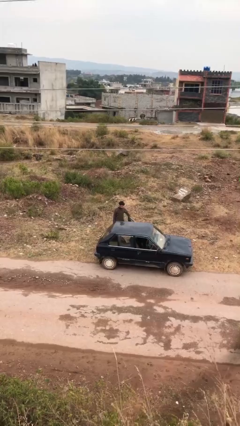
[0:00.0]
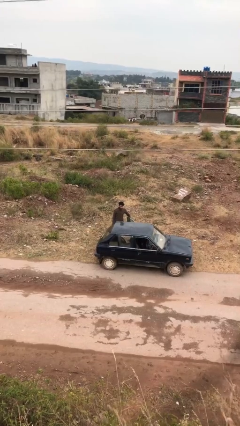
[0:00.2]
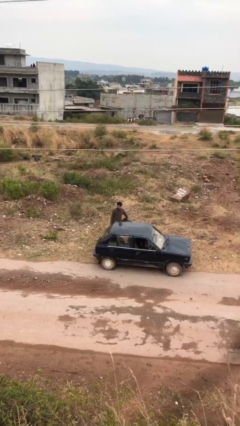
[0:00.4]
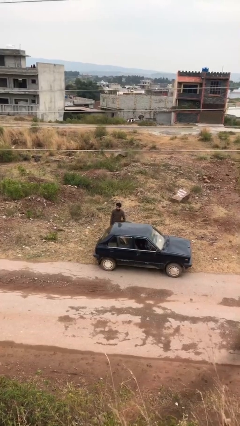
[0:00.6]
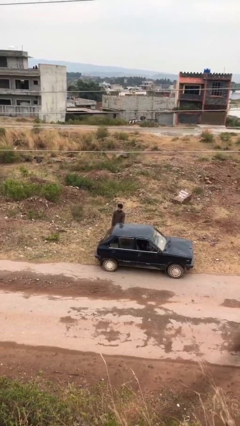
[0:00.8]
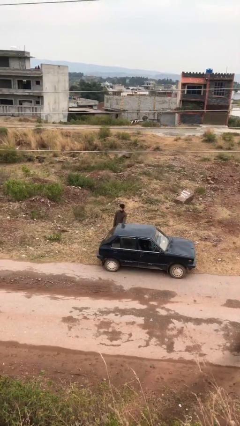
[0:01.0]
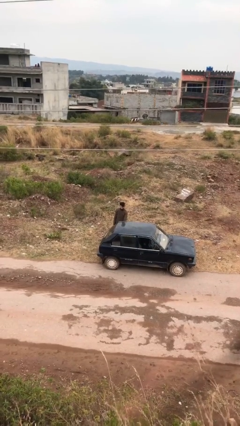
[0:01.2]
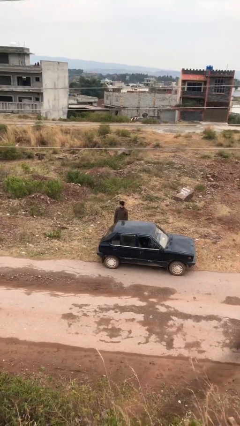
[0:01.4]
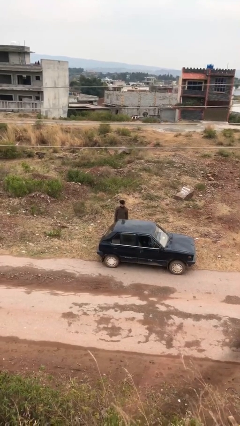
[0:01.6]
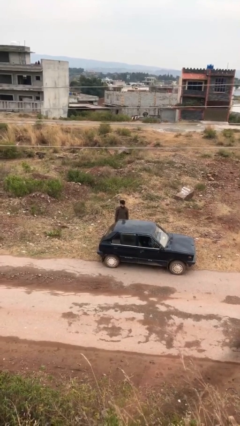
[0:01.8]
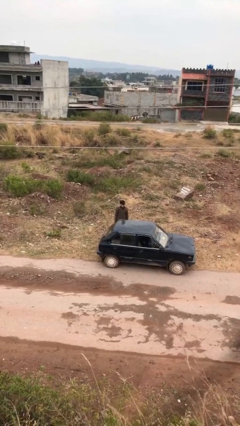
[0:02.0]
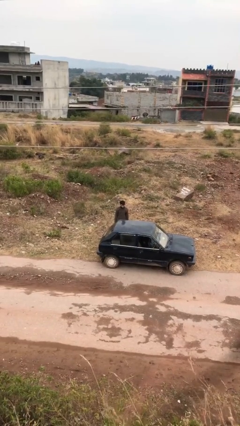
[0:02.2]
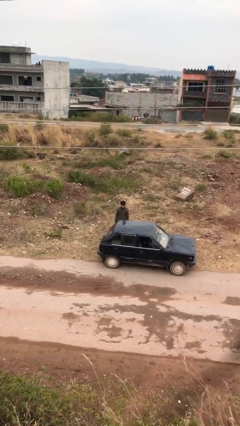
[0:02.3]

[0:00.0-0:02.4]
person closes car door

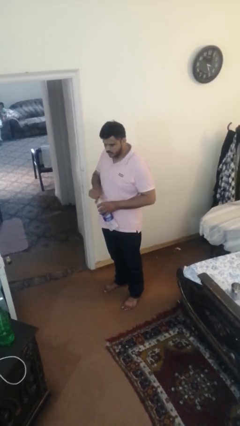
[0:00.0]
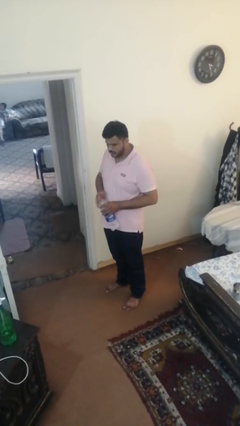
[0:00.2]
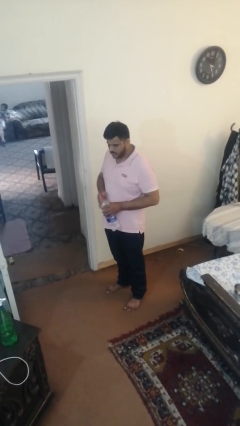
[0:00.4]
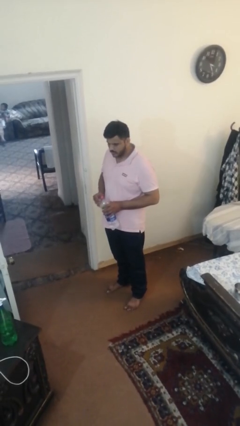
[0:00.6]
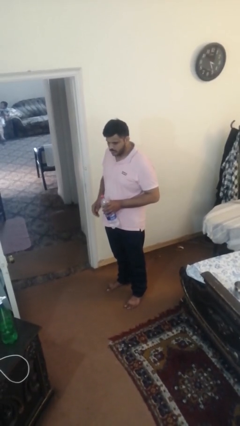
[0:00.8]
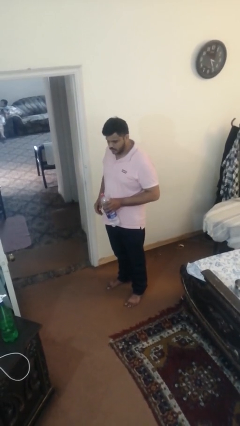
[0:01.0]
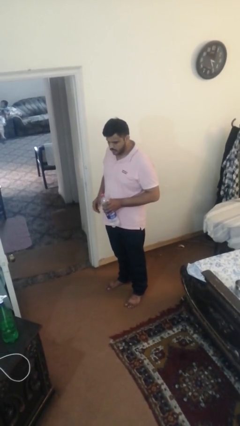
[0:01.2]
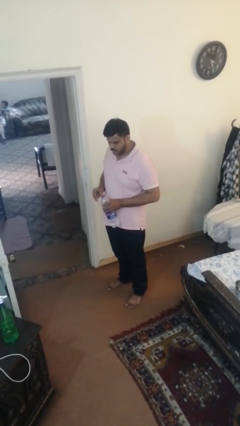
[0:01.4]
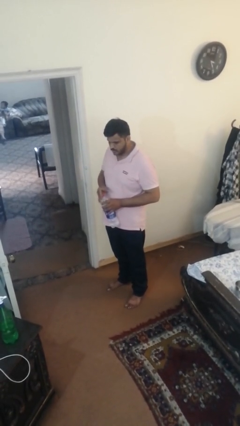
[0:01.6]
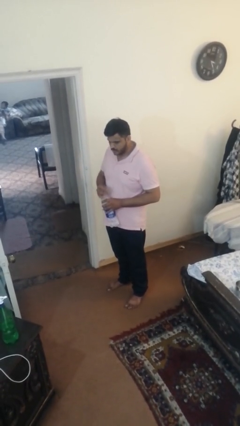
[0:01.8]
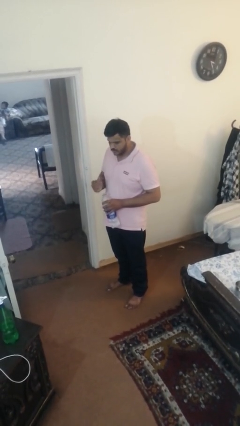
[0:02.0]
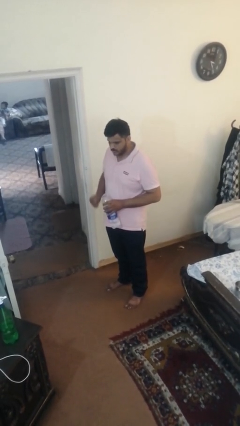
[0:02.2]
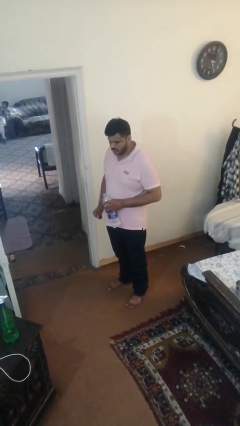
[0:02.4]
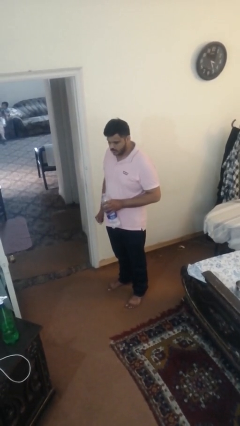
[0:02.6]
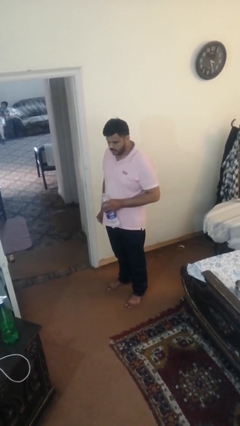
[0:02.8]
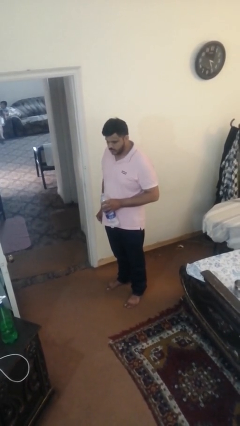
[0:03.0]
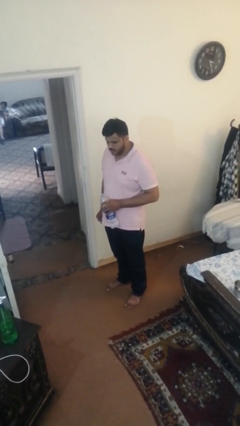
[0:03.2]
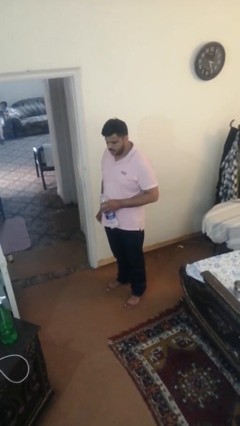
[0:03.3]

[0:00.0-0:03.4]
person unscrews lid from bottle

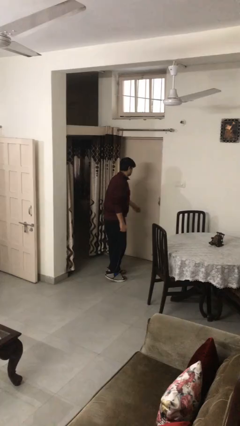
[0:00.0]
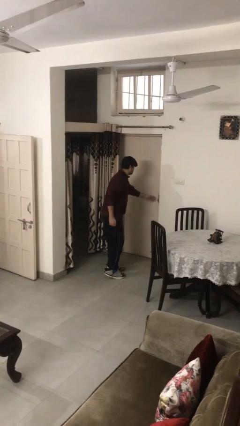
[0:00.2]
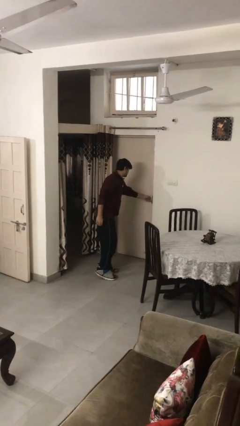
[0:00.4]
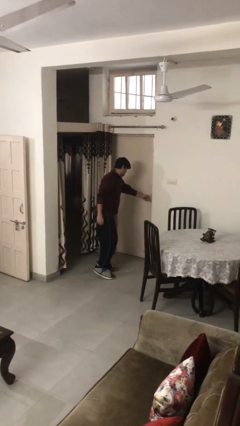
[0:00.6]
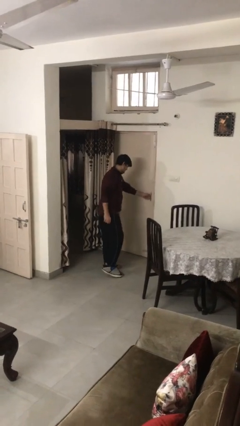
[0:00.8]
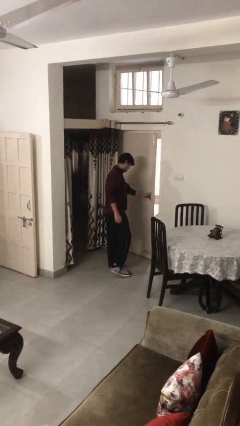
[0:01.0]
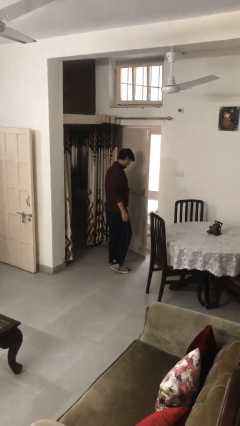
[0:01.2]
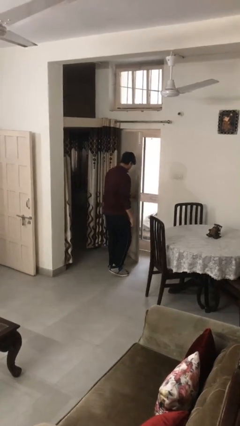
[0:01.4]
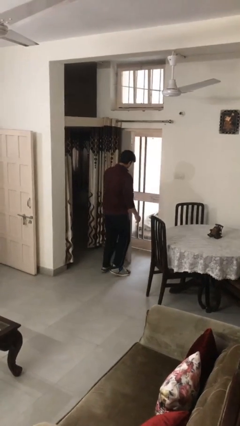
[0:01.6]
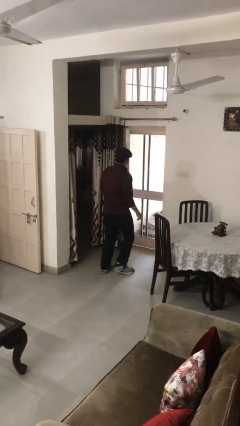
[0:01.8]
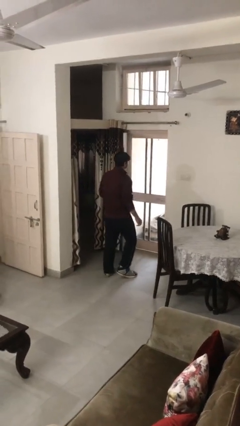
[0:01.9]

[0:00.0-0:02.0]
person opens facility door

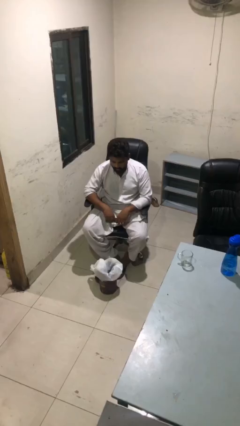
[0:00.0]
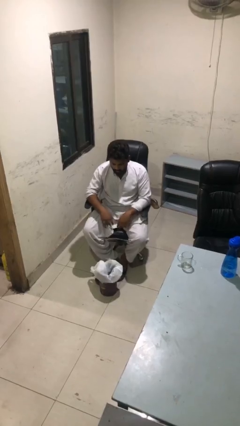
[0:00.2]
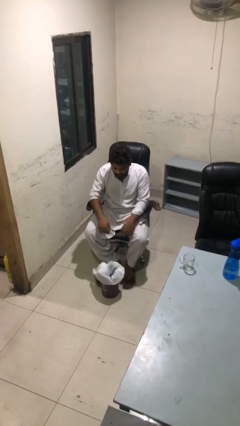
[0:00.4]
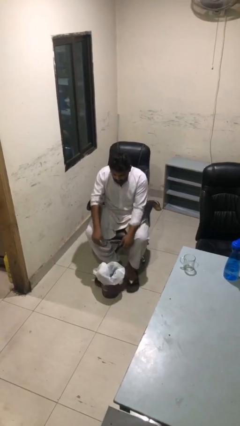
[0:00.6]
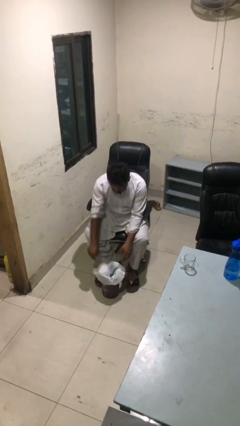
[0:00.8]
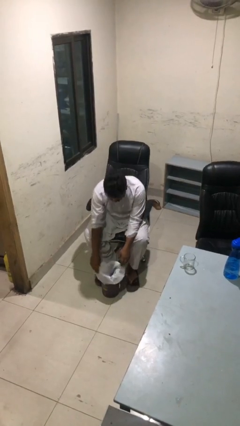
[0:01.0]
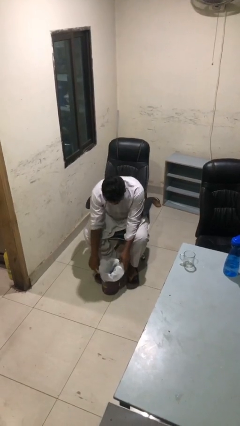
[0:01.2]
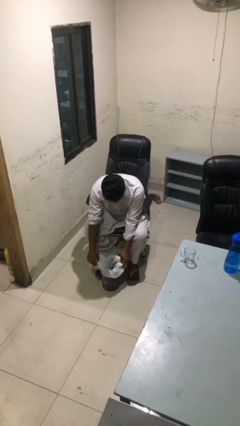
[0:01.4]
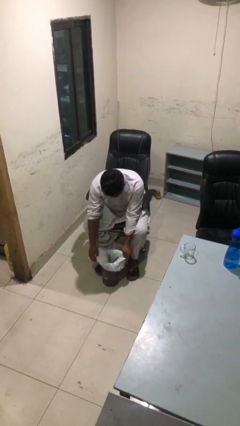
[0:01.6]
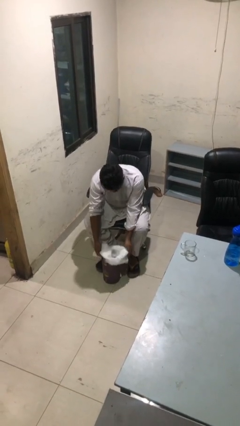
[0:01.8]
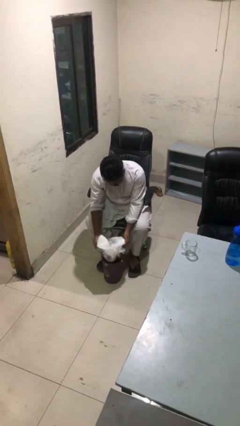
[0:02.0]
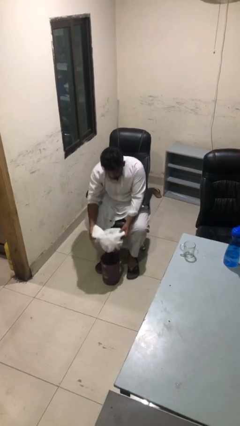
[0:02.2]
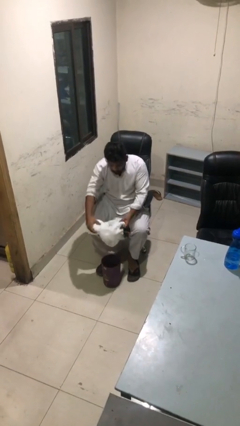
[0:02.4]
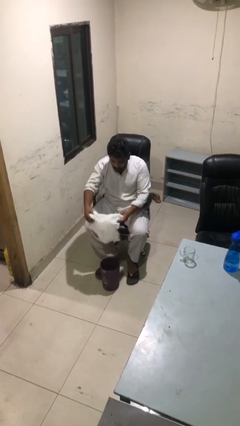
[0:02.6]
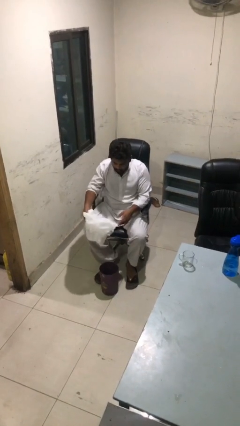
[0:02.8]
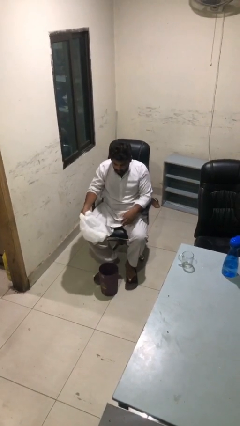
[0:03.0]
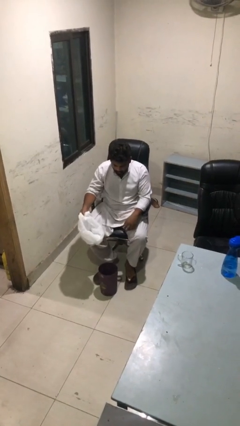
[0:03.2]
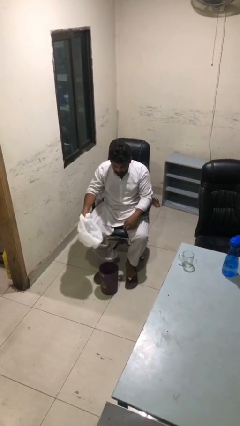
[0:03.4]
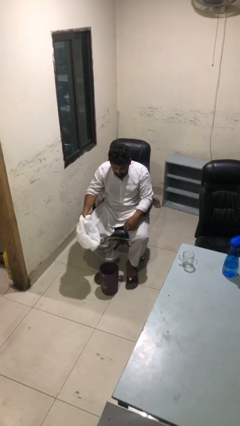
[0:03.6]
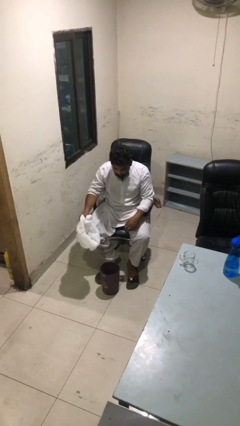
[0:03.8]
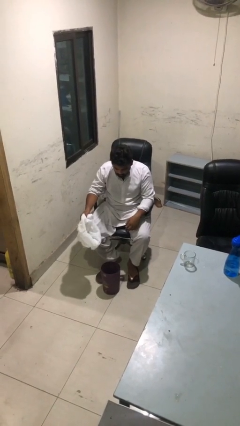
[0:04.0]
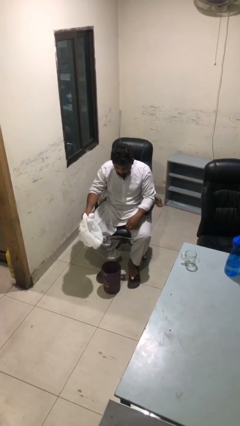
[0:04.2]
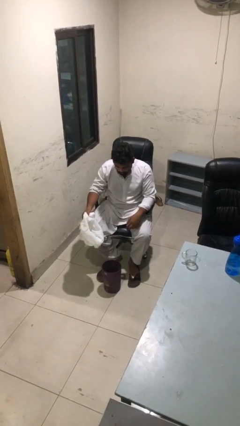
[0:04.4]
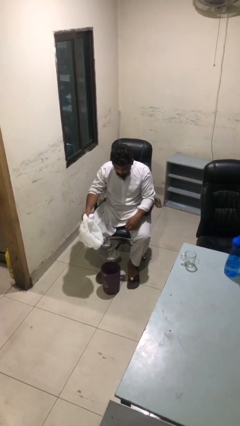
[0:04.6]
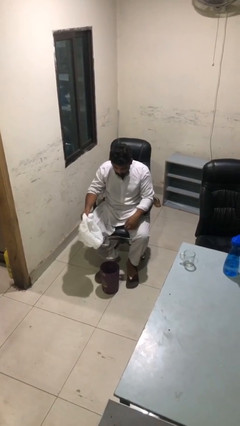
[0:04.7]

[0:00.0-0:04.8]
person removes trashbag from trashcan

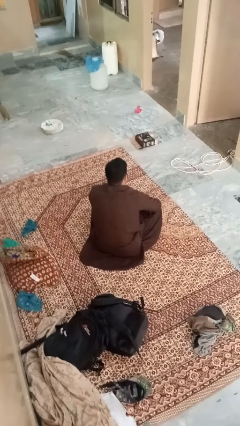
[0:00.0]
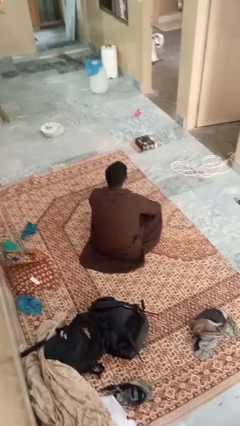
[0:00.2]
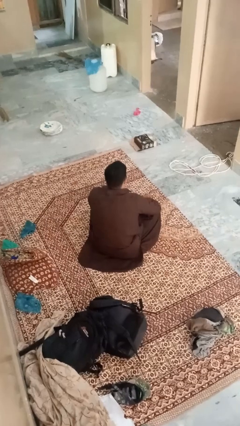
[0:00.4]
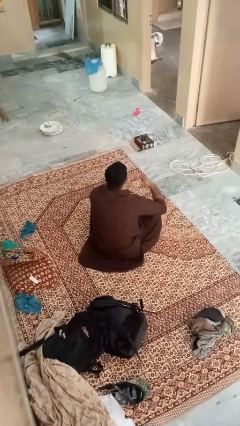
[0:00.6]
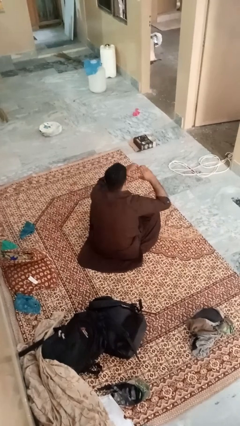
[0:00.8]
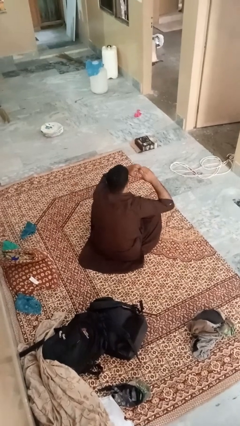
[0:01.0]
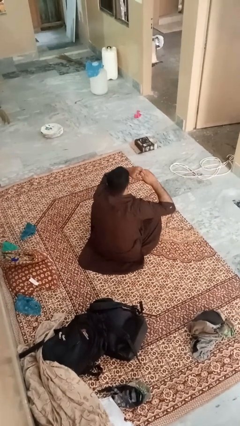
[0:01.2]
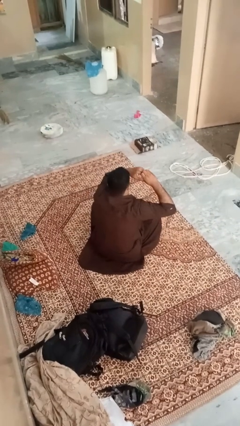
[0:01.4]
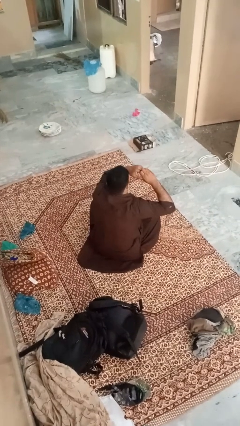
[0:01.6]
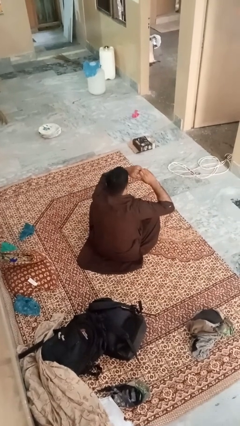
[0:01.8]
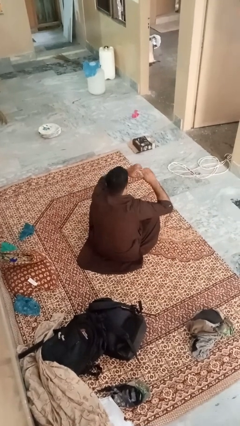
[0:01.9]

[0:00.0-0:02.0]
person gestures heart

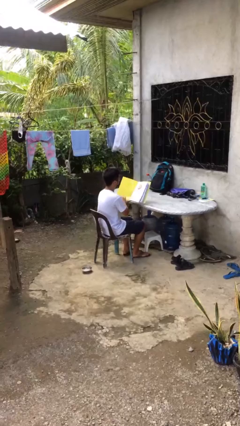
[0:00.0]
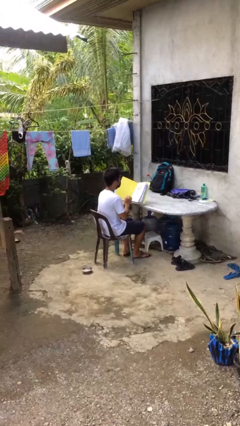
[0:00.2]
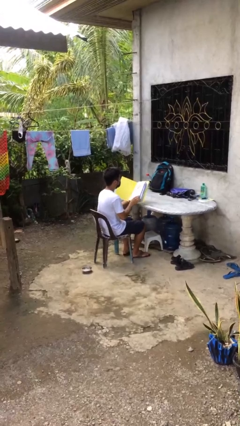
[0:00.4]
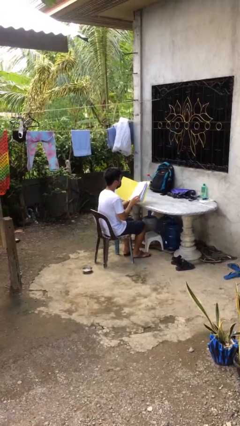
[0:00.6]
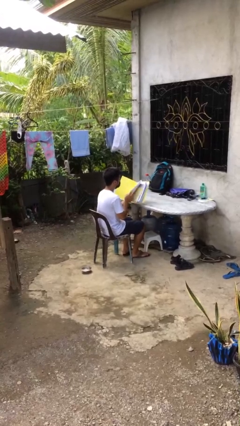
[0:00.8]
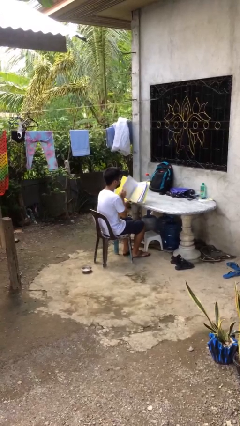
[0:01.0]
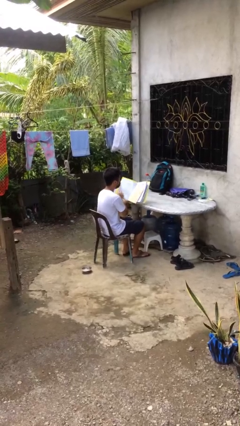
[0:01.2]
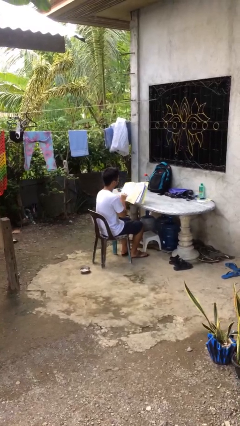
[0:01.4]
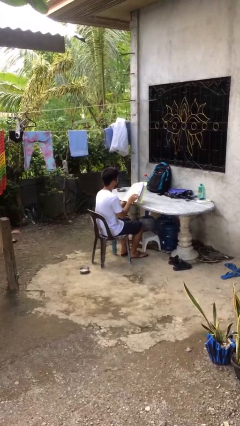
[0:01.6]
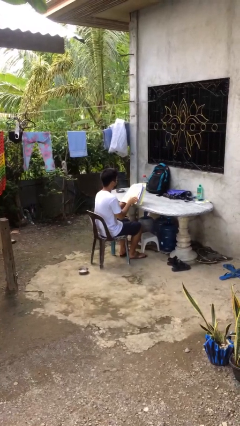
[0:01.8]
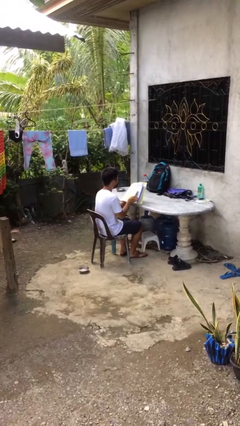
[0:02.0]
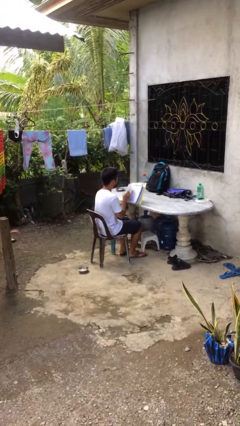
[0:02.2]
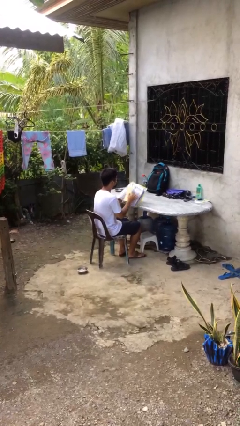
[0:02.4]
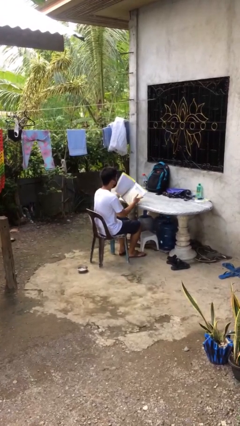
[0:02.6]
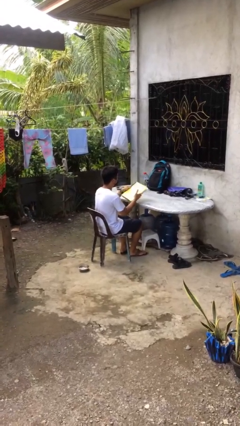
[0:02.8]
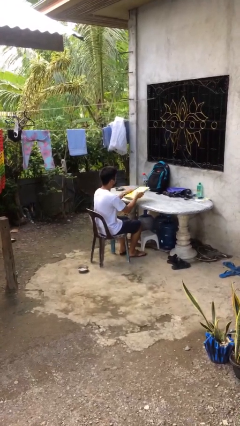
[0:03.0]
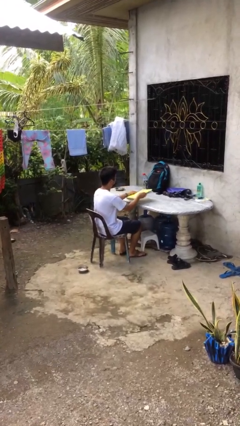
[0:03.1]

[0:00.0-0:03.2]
person reads document
